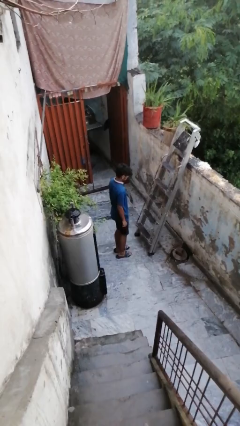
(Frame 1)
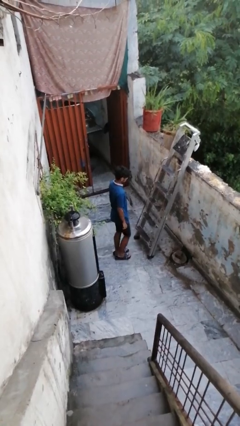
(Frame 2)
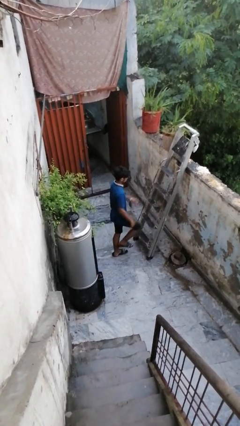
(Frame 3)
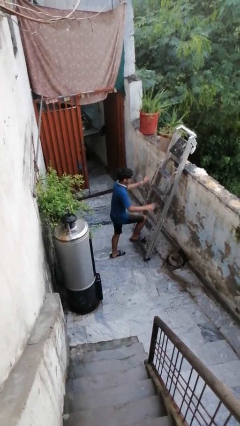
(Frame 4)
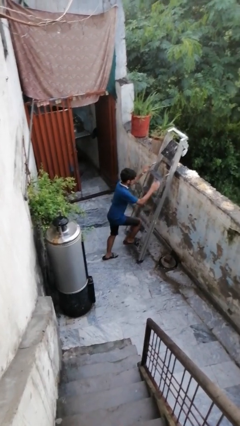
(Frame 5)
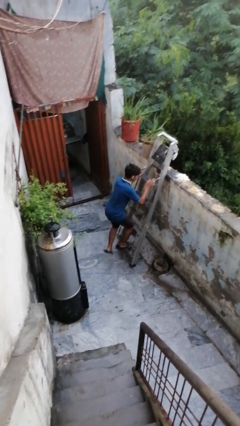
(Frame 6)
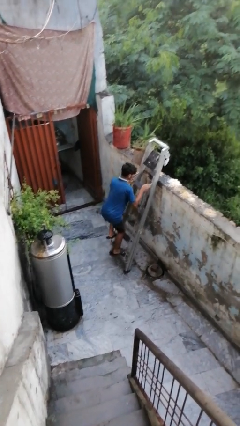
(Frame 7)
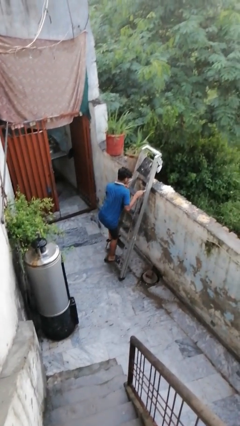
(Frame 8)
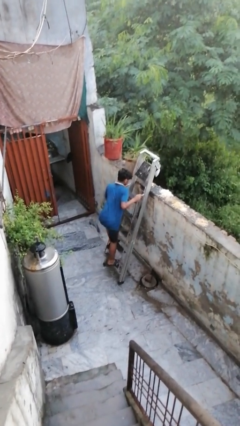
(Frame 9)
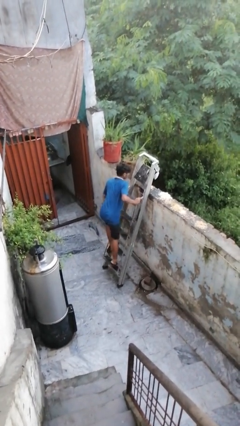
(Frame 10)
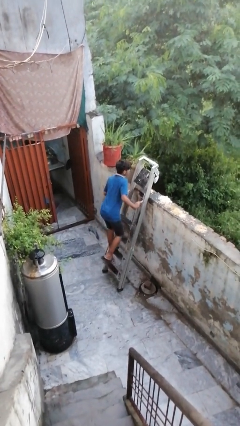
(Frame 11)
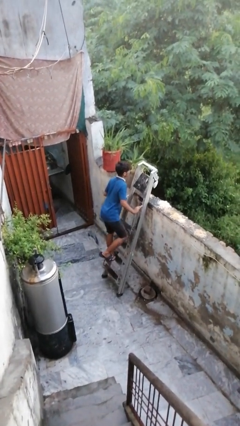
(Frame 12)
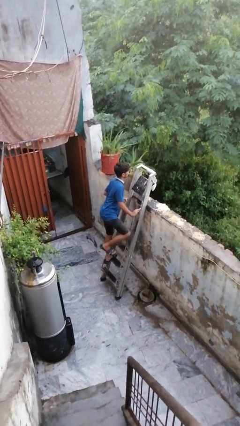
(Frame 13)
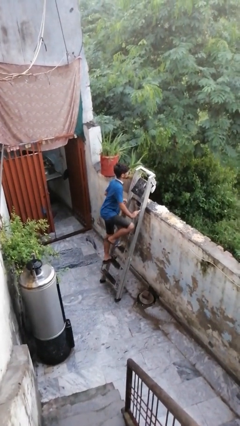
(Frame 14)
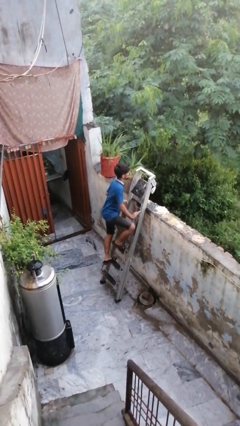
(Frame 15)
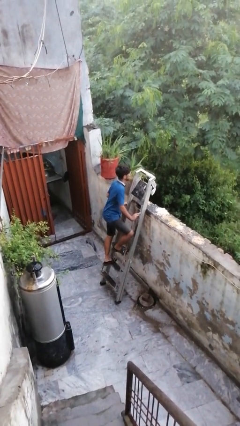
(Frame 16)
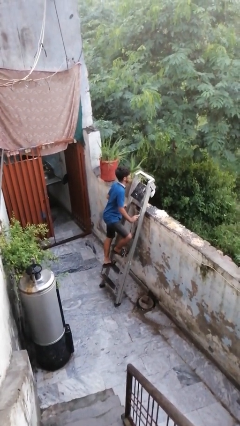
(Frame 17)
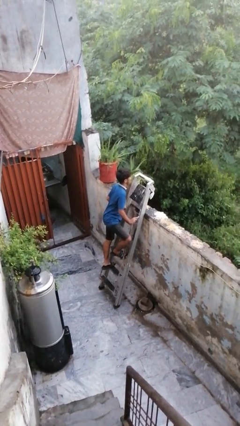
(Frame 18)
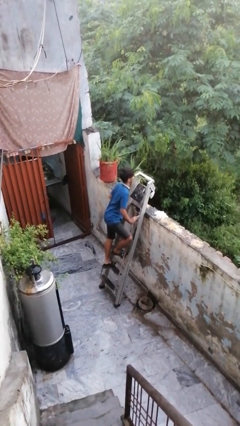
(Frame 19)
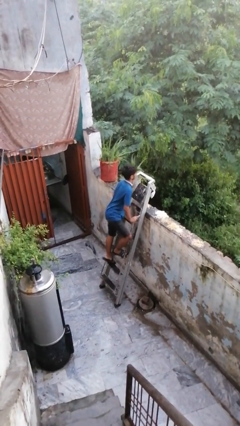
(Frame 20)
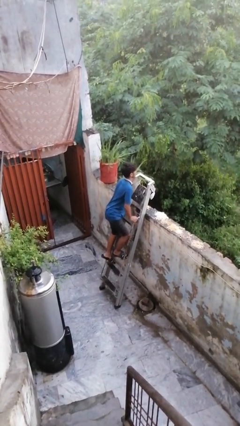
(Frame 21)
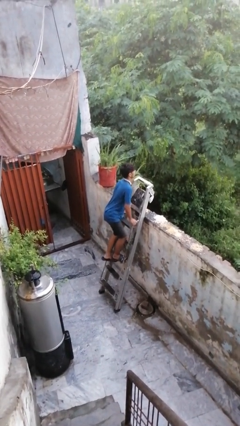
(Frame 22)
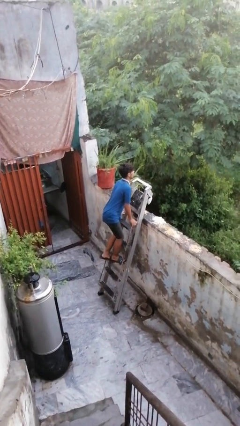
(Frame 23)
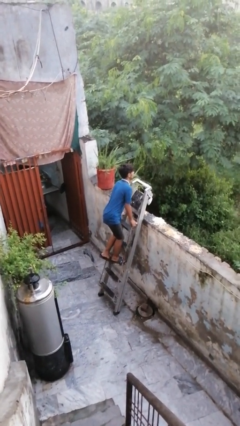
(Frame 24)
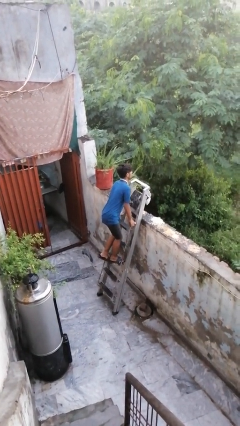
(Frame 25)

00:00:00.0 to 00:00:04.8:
person climbs up ladder

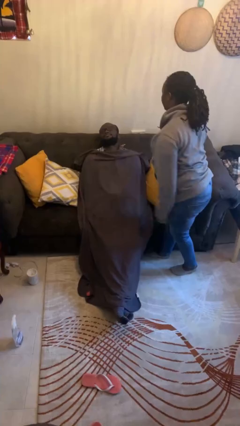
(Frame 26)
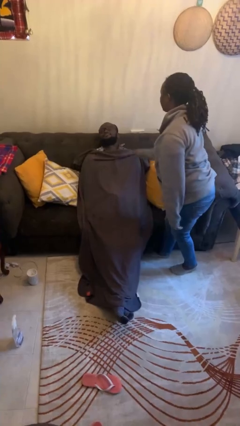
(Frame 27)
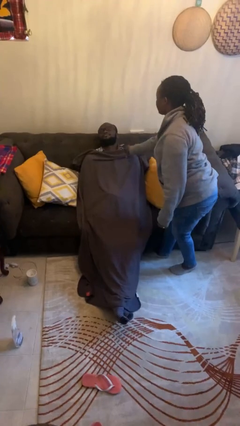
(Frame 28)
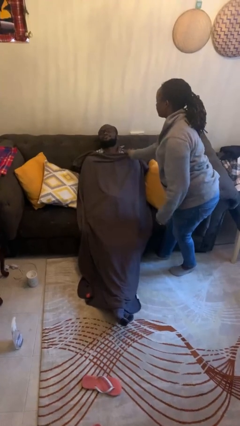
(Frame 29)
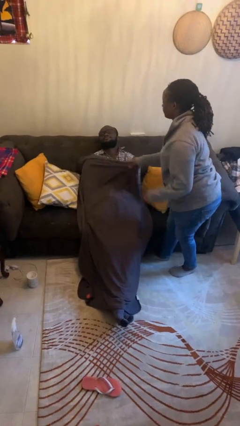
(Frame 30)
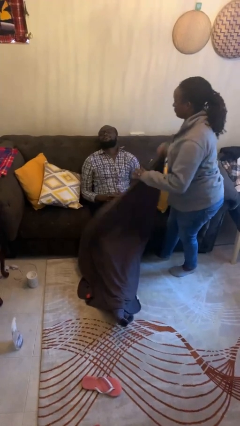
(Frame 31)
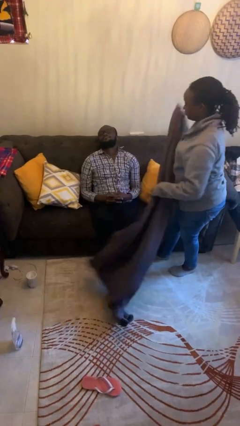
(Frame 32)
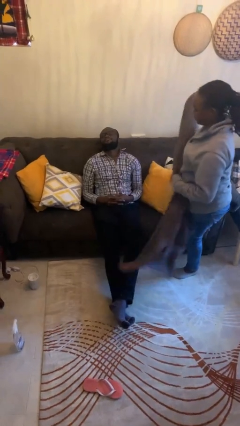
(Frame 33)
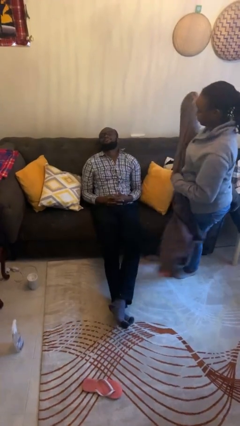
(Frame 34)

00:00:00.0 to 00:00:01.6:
person uncovers friend with blanket

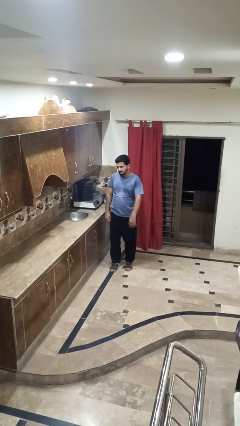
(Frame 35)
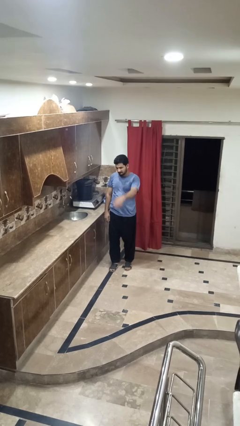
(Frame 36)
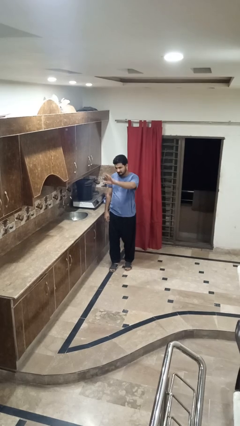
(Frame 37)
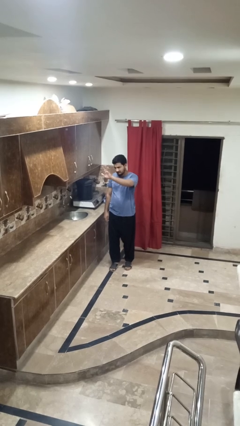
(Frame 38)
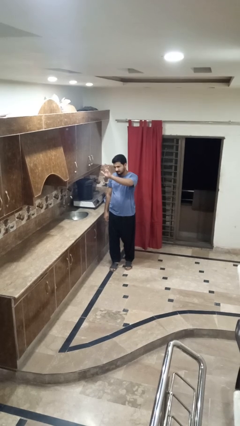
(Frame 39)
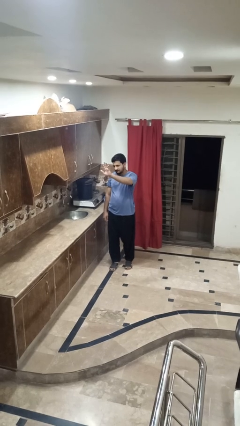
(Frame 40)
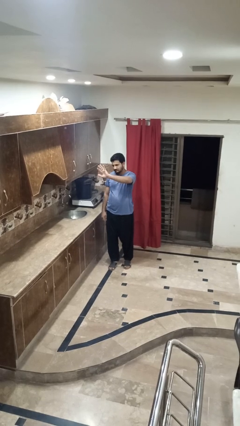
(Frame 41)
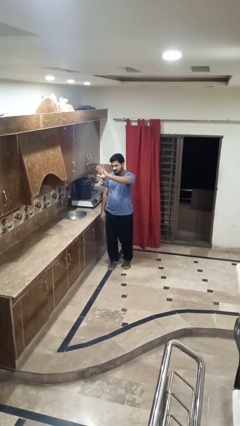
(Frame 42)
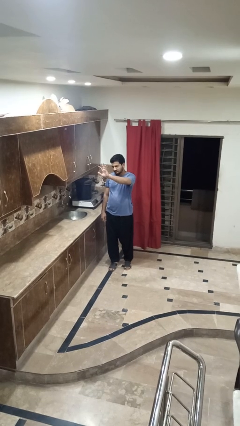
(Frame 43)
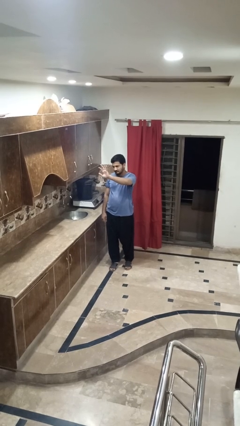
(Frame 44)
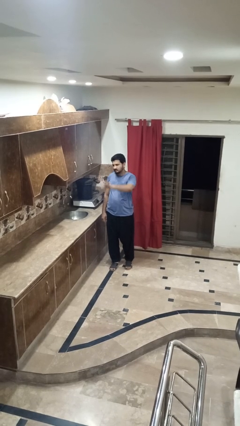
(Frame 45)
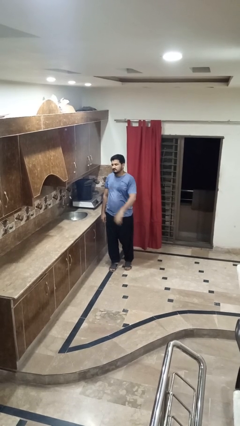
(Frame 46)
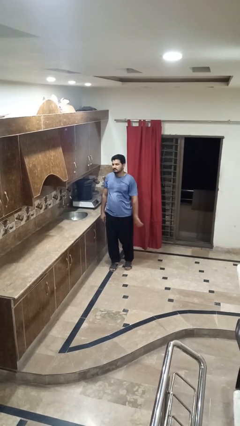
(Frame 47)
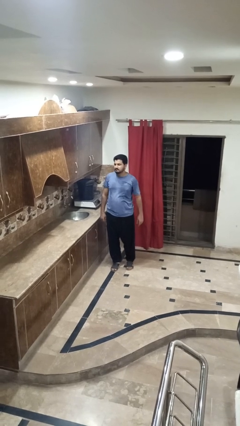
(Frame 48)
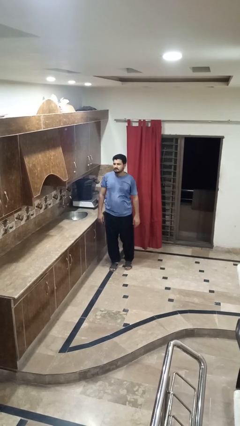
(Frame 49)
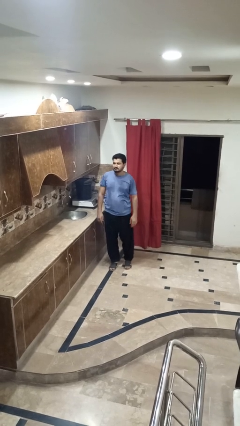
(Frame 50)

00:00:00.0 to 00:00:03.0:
person waves at person

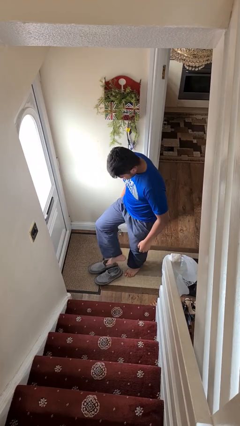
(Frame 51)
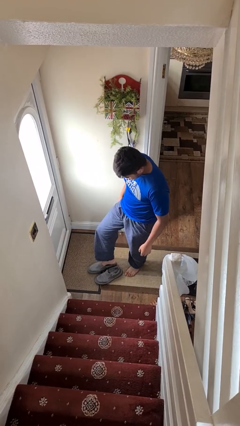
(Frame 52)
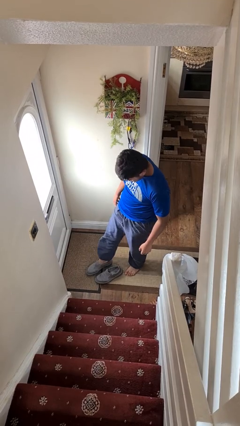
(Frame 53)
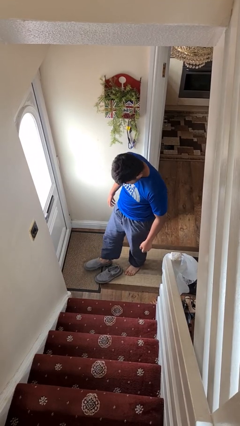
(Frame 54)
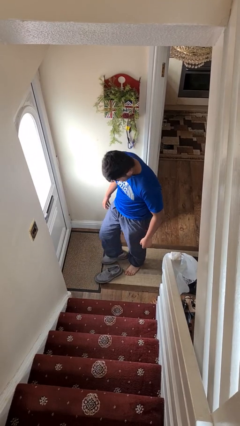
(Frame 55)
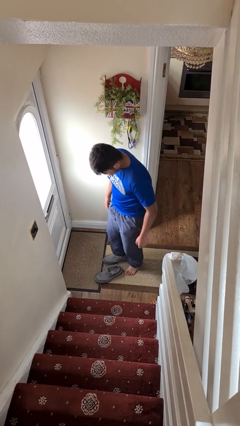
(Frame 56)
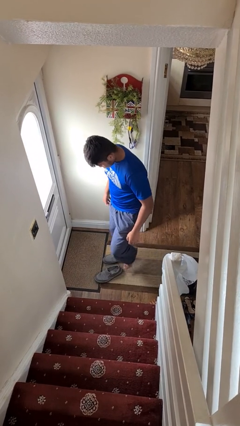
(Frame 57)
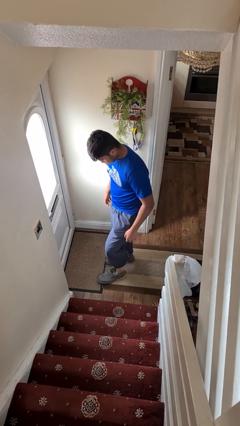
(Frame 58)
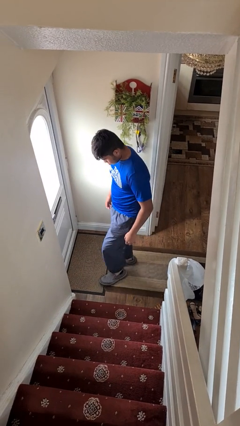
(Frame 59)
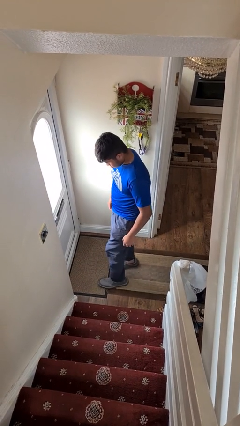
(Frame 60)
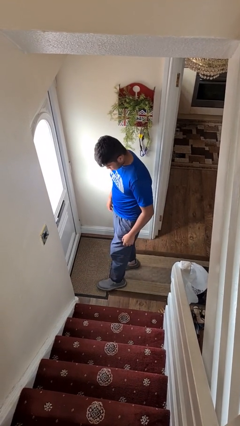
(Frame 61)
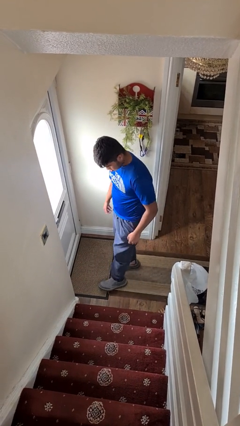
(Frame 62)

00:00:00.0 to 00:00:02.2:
person puts on shoes

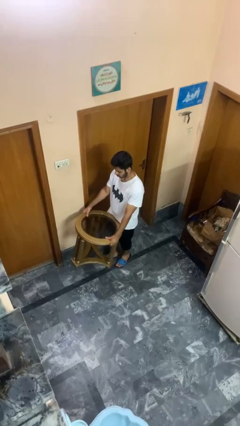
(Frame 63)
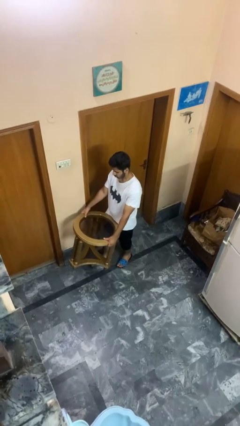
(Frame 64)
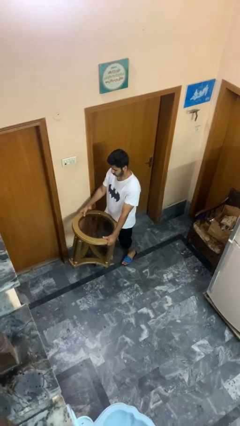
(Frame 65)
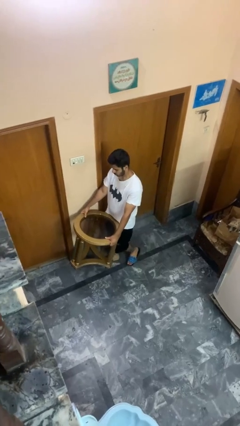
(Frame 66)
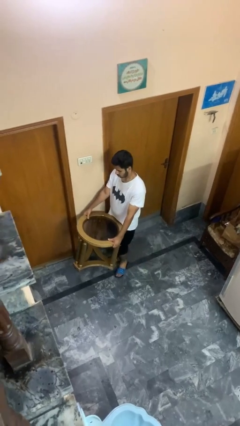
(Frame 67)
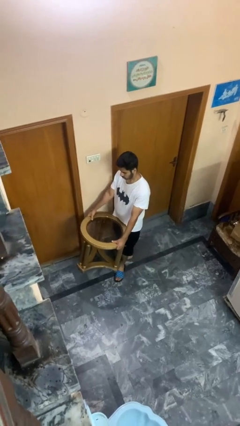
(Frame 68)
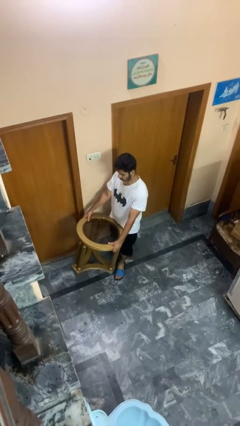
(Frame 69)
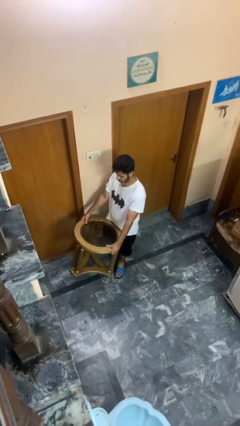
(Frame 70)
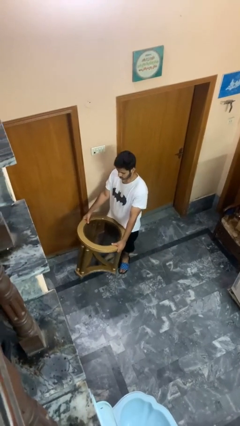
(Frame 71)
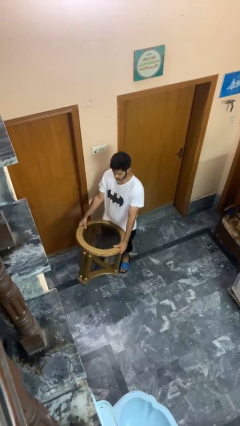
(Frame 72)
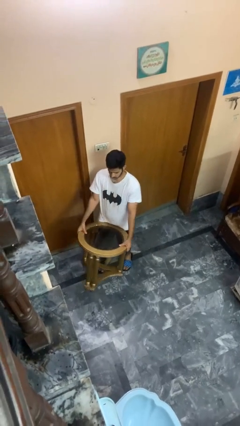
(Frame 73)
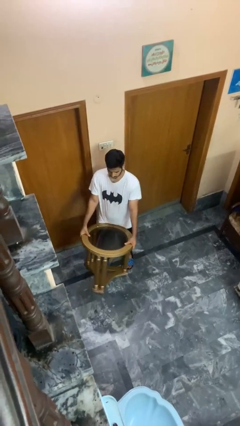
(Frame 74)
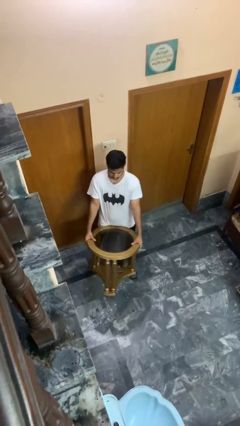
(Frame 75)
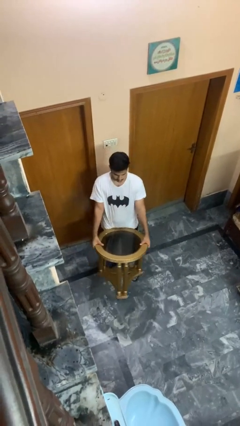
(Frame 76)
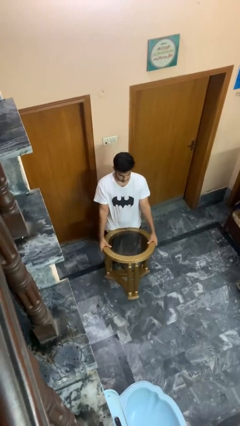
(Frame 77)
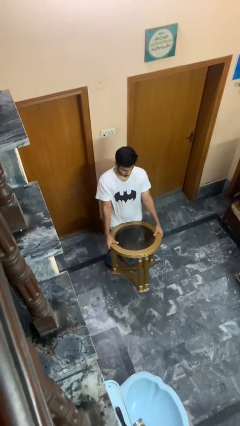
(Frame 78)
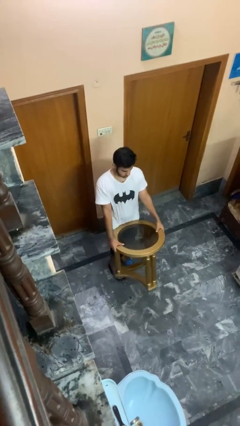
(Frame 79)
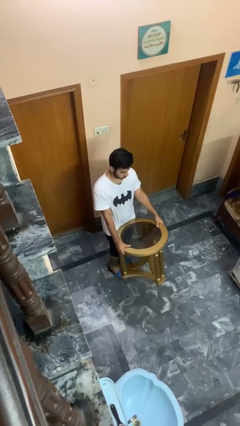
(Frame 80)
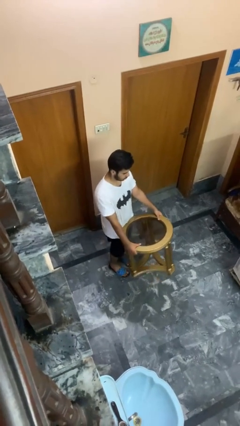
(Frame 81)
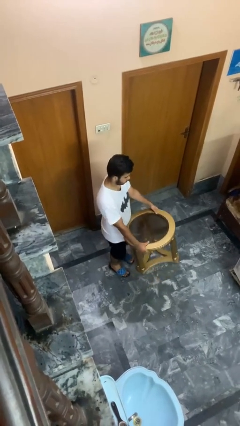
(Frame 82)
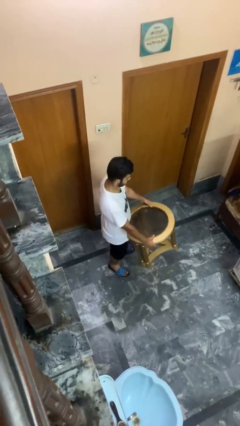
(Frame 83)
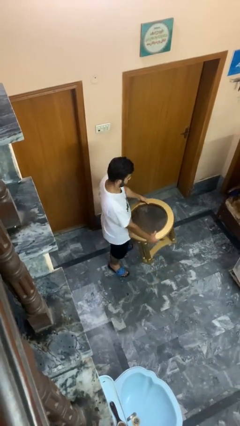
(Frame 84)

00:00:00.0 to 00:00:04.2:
person carries furniture

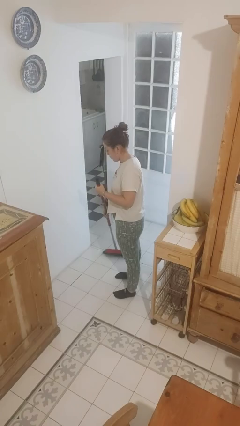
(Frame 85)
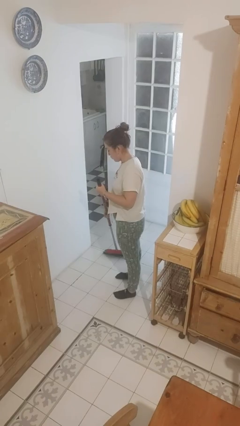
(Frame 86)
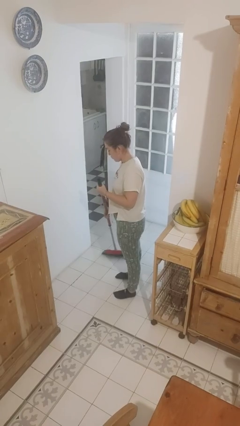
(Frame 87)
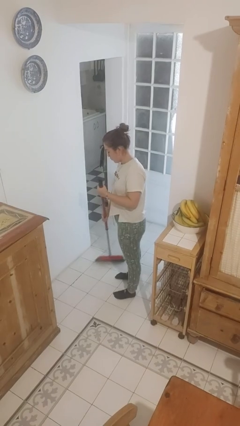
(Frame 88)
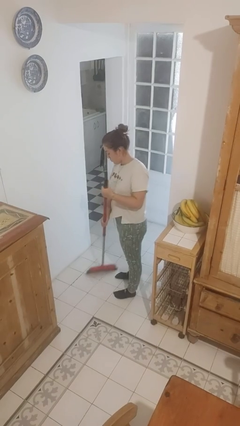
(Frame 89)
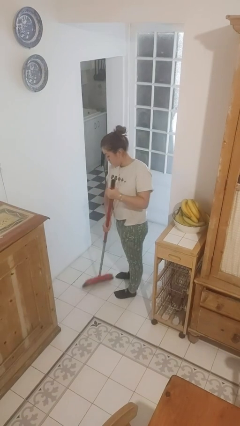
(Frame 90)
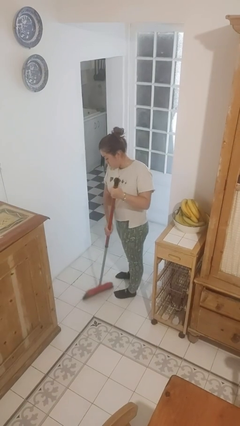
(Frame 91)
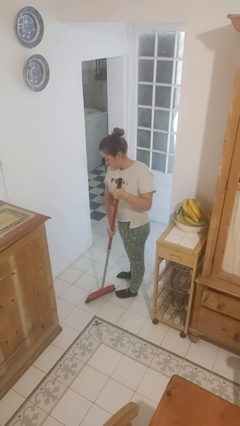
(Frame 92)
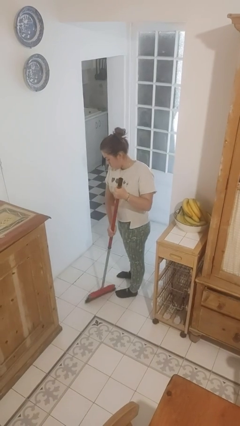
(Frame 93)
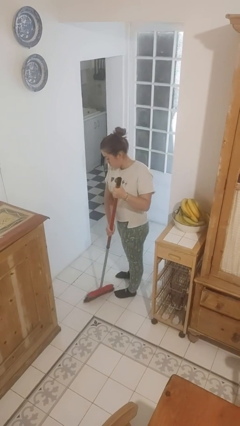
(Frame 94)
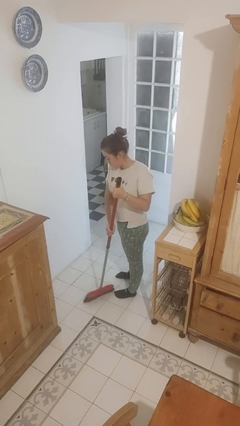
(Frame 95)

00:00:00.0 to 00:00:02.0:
person sweeps floor
